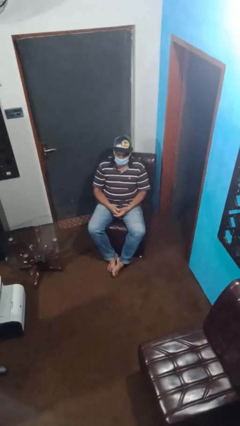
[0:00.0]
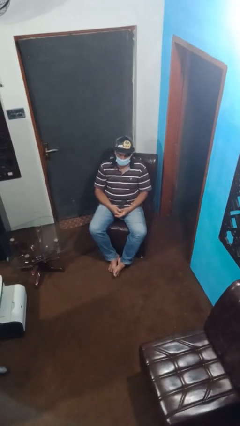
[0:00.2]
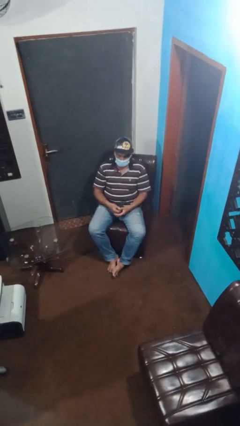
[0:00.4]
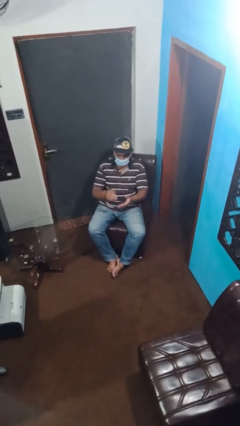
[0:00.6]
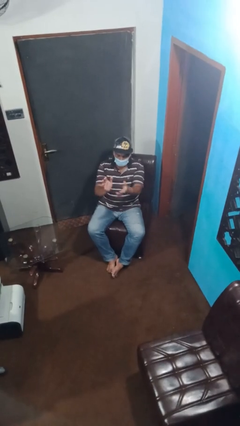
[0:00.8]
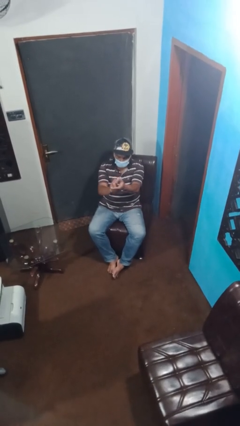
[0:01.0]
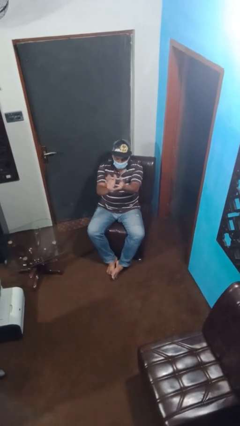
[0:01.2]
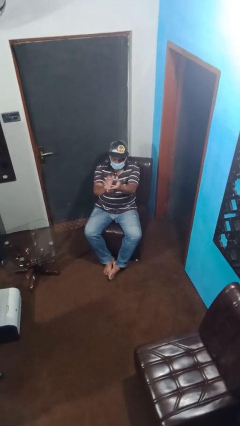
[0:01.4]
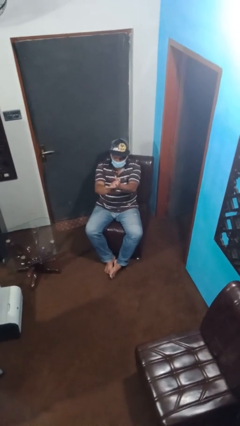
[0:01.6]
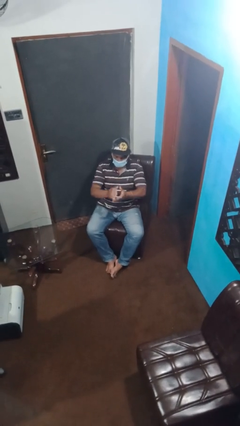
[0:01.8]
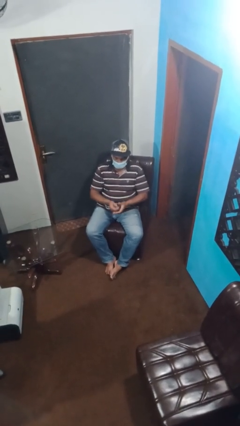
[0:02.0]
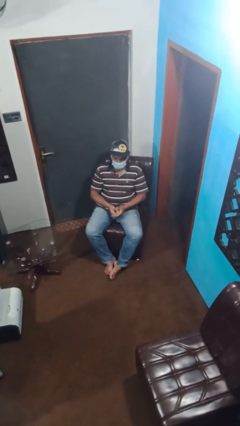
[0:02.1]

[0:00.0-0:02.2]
person claps hands

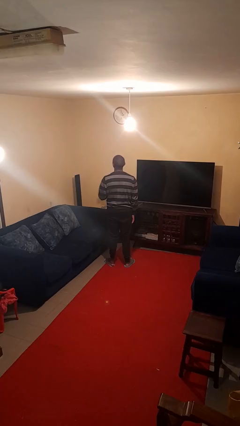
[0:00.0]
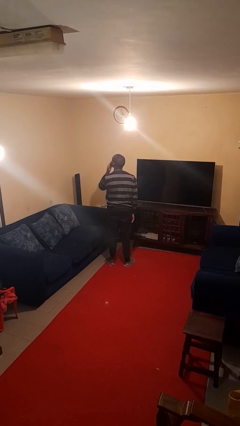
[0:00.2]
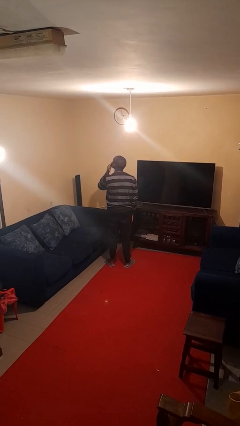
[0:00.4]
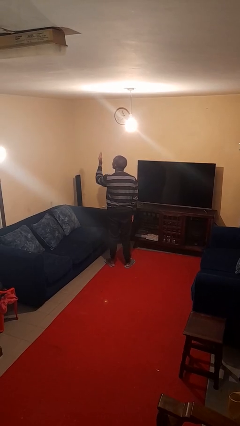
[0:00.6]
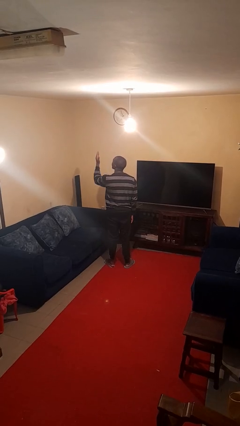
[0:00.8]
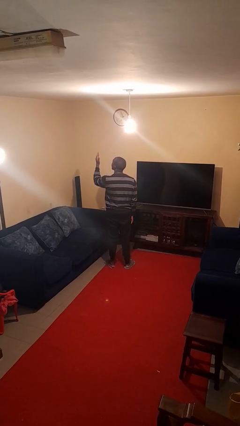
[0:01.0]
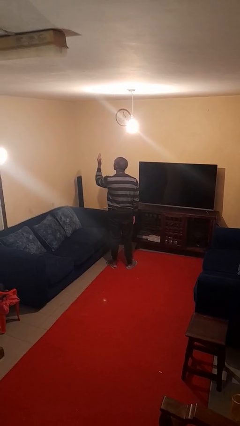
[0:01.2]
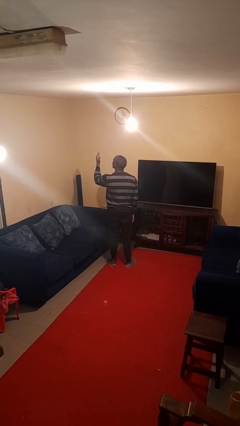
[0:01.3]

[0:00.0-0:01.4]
person gestures blow kiss

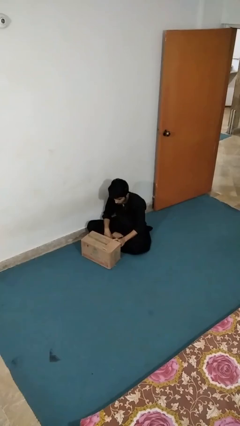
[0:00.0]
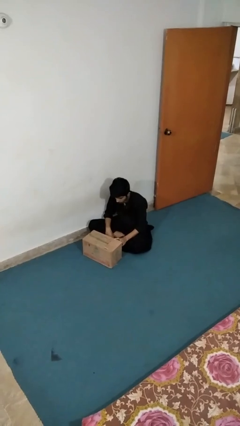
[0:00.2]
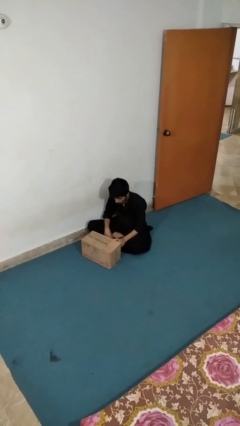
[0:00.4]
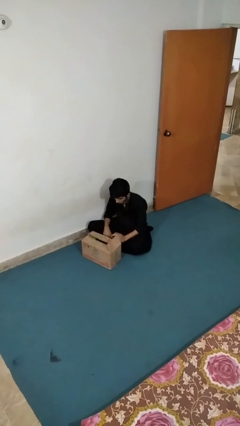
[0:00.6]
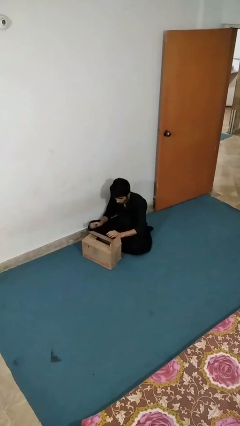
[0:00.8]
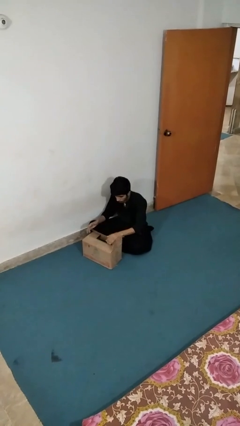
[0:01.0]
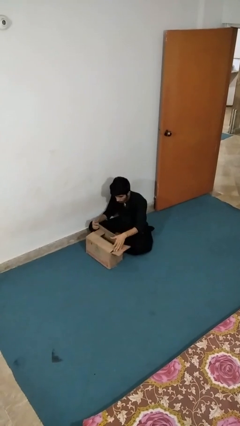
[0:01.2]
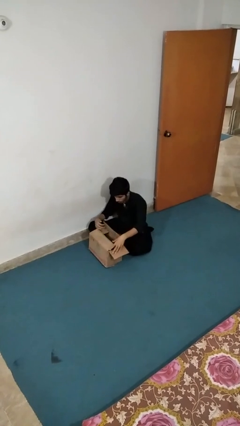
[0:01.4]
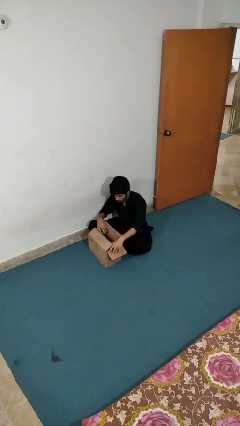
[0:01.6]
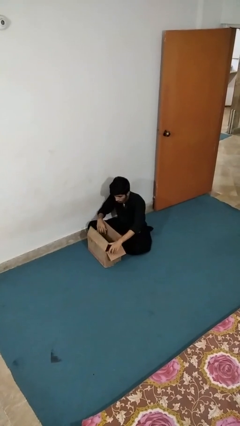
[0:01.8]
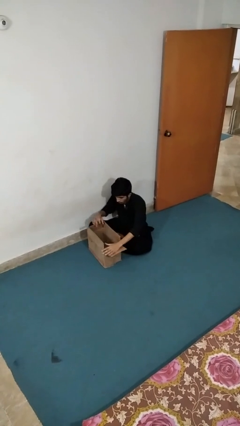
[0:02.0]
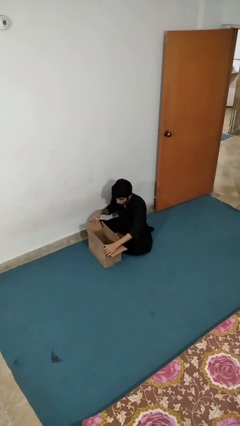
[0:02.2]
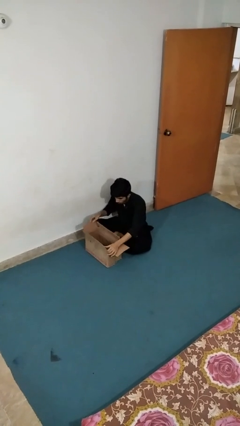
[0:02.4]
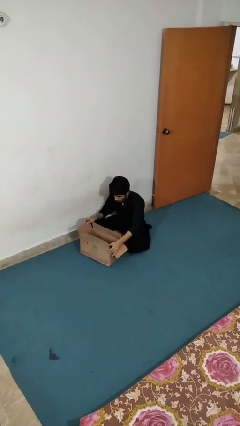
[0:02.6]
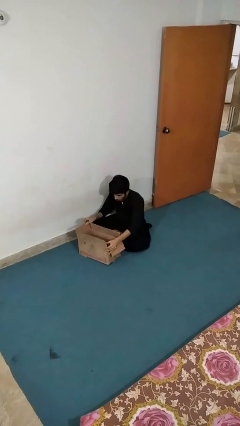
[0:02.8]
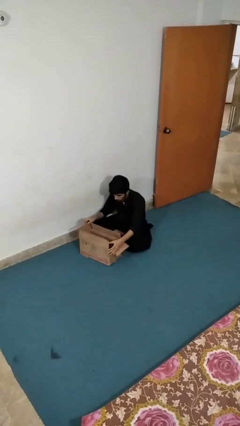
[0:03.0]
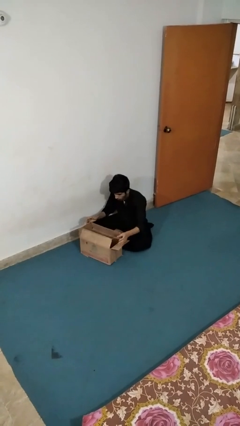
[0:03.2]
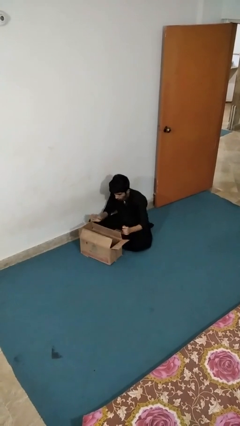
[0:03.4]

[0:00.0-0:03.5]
person opens box

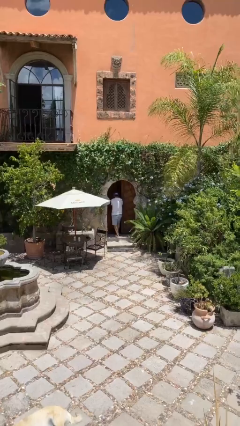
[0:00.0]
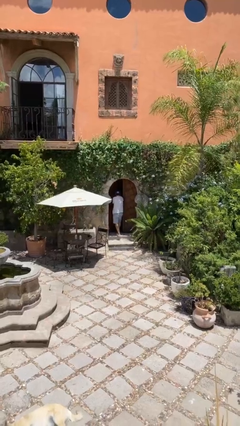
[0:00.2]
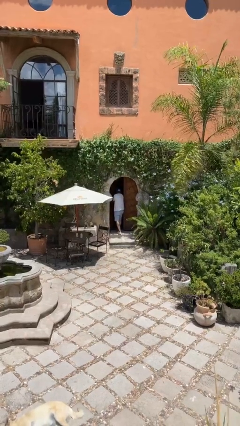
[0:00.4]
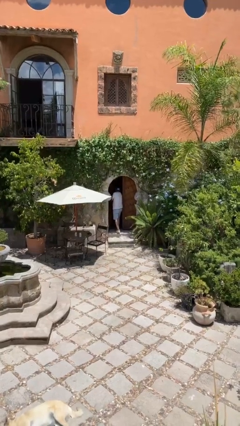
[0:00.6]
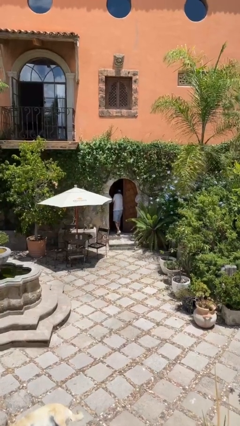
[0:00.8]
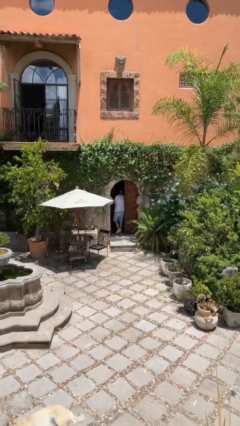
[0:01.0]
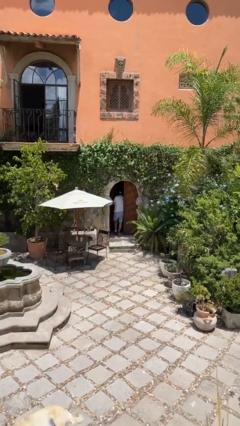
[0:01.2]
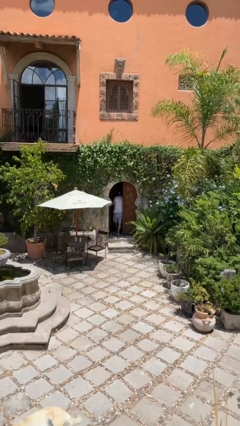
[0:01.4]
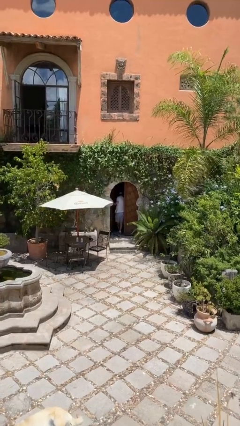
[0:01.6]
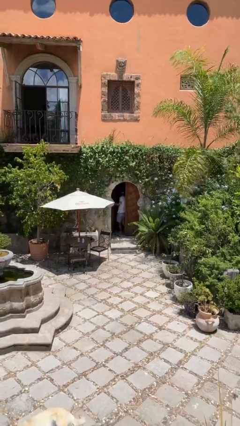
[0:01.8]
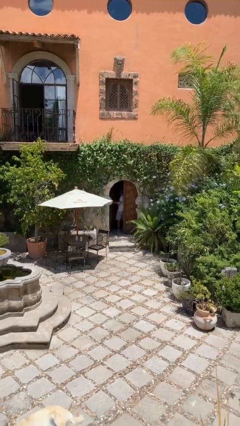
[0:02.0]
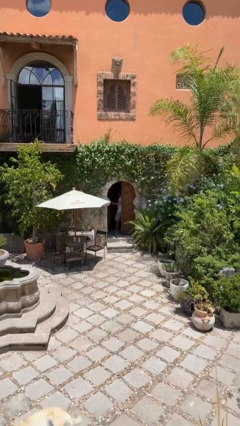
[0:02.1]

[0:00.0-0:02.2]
person exits scene through structure

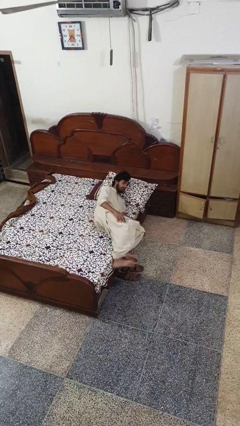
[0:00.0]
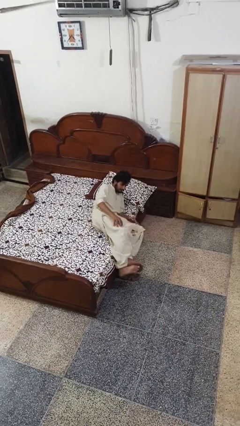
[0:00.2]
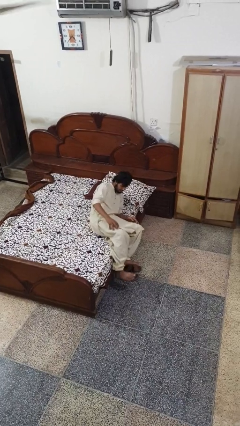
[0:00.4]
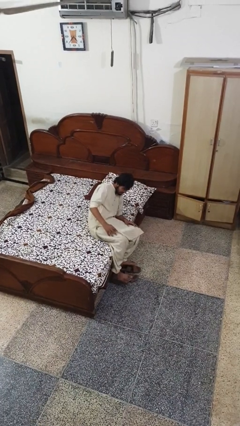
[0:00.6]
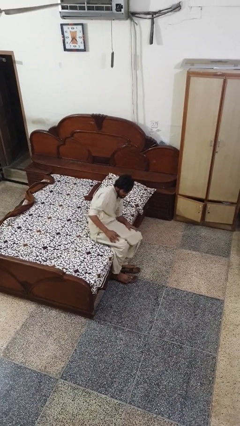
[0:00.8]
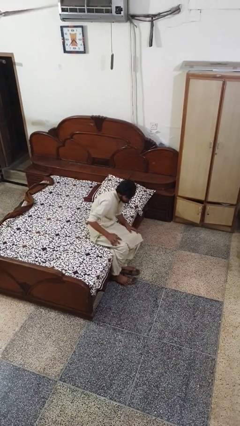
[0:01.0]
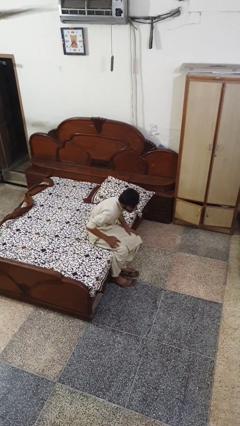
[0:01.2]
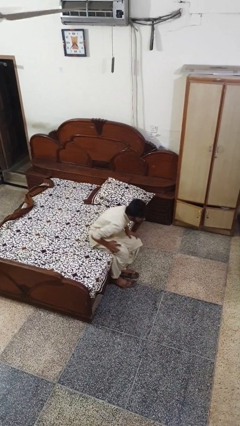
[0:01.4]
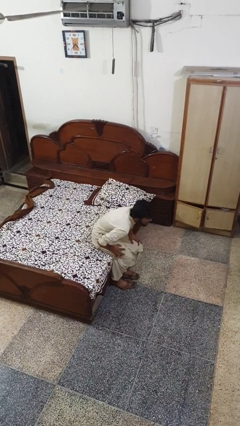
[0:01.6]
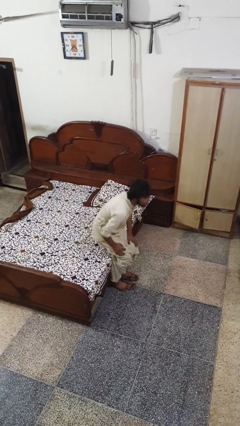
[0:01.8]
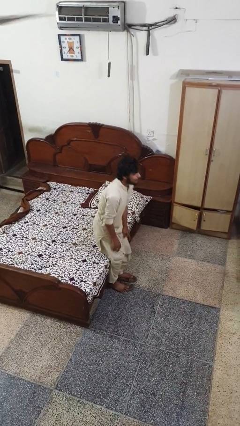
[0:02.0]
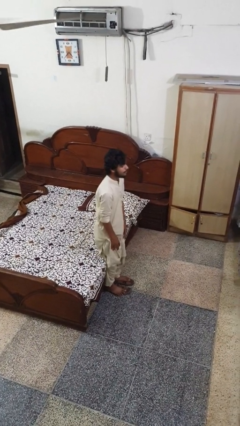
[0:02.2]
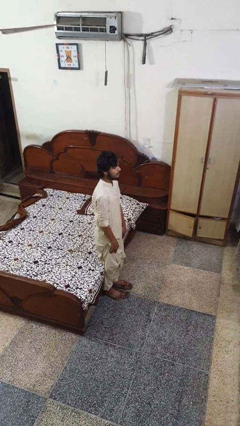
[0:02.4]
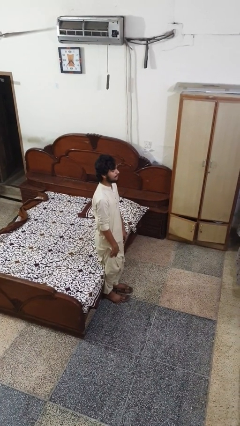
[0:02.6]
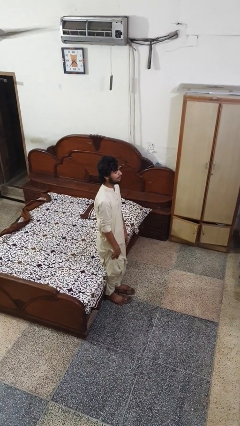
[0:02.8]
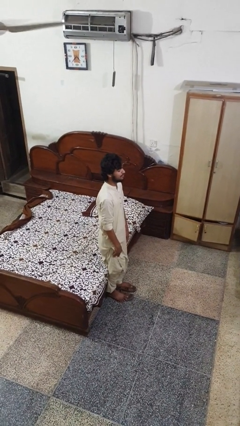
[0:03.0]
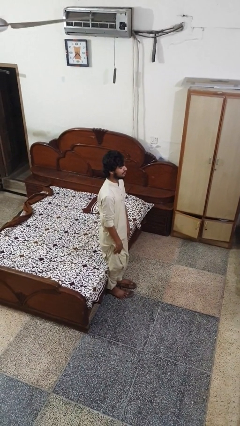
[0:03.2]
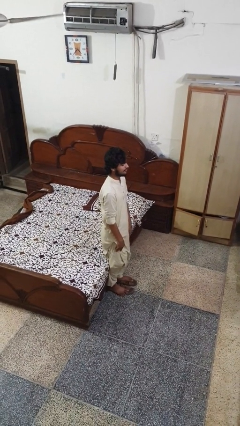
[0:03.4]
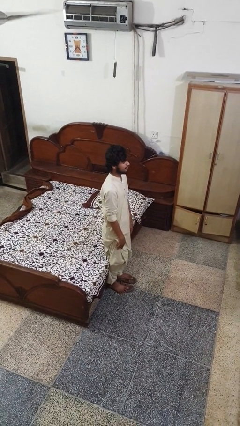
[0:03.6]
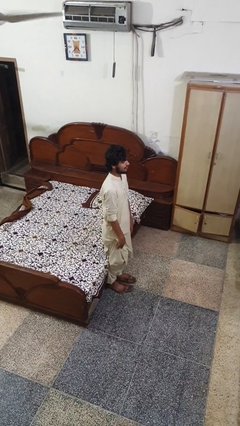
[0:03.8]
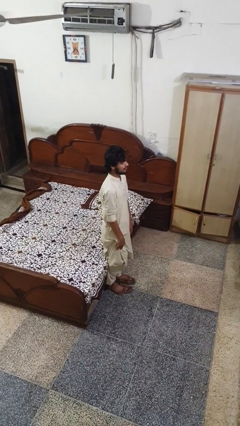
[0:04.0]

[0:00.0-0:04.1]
person stands up

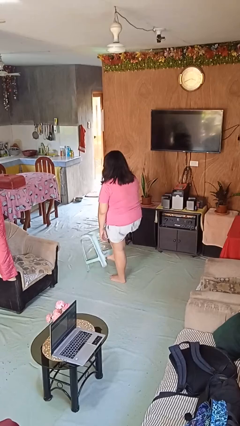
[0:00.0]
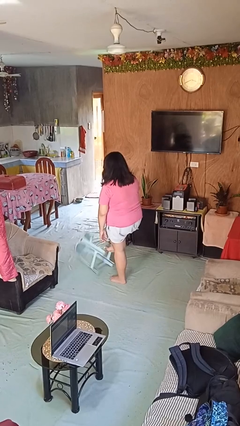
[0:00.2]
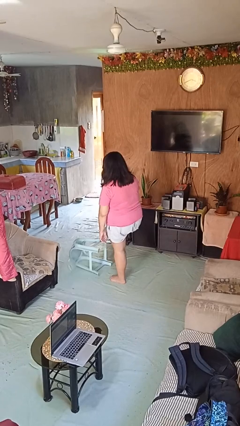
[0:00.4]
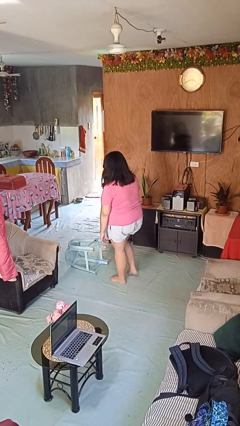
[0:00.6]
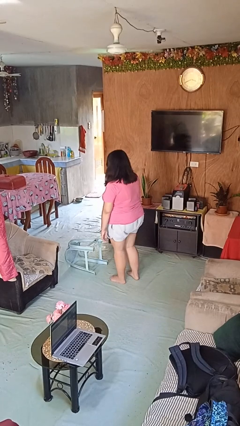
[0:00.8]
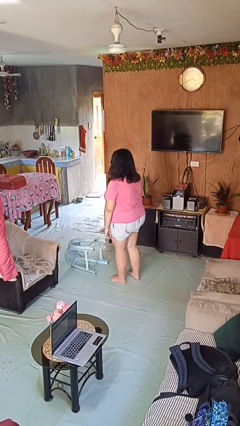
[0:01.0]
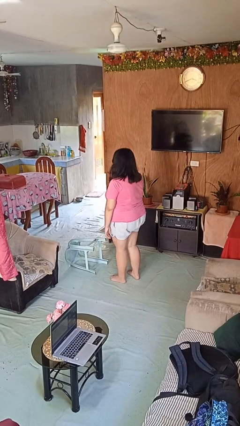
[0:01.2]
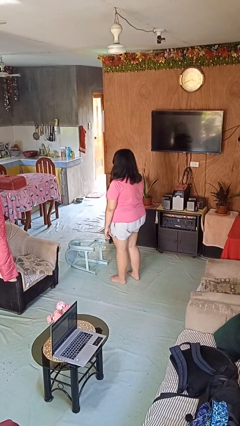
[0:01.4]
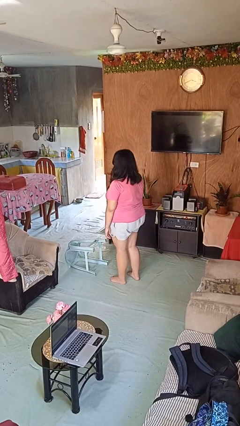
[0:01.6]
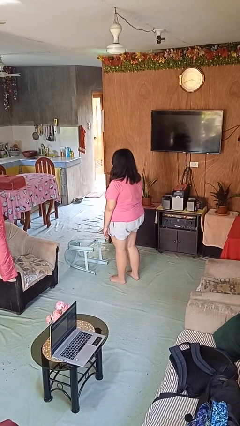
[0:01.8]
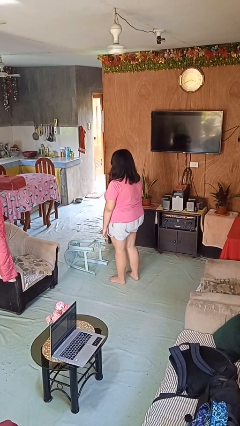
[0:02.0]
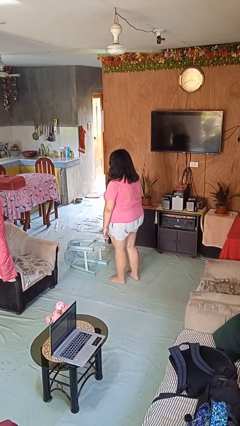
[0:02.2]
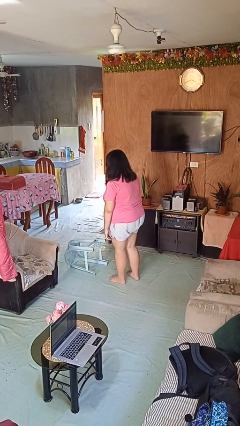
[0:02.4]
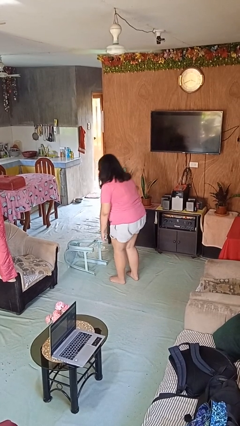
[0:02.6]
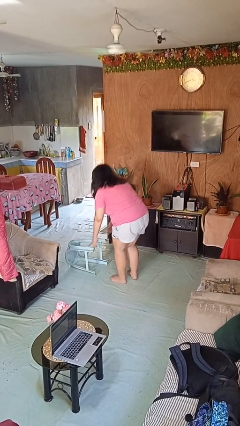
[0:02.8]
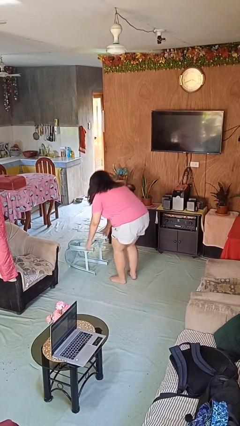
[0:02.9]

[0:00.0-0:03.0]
person knocks over furniture

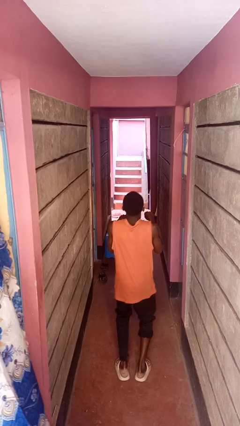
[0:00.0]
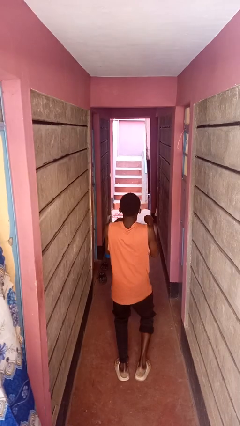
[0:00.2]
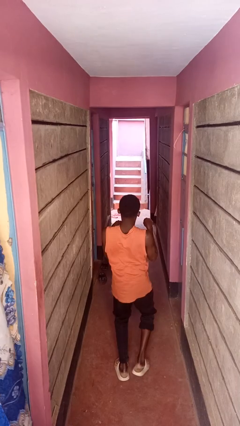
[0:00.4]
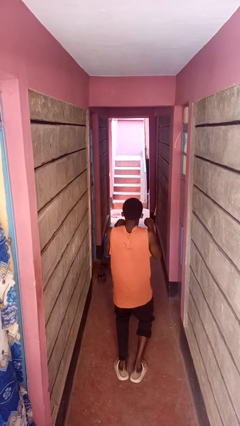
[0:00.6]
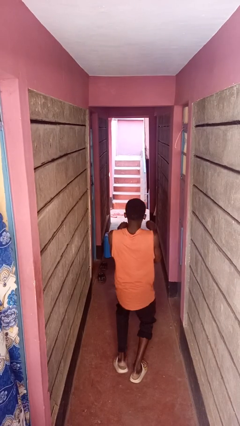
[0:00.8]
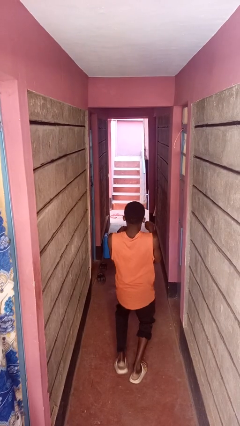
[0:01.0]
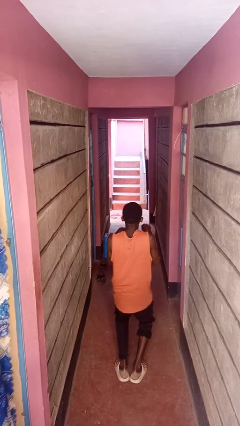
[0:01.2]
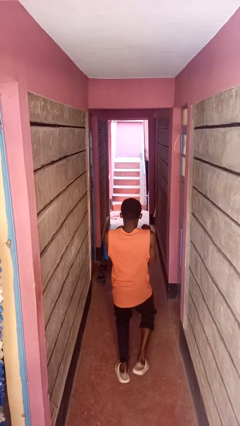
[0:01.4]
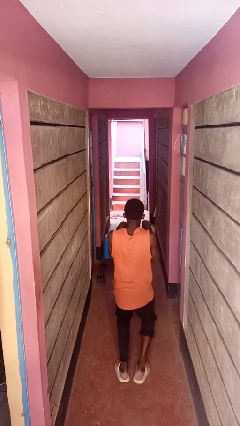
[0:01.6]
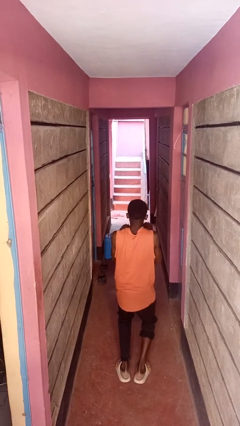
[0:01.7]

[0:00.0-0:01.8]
person dances in place
